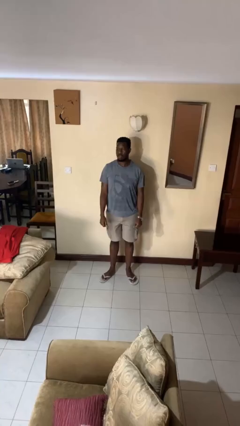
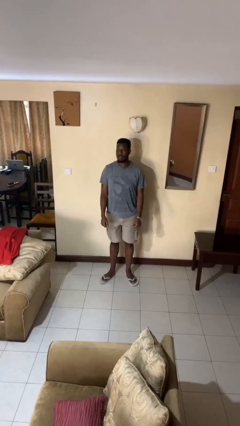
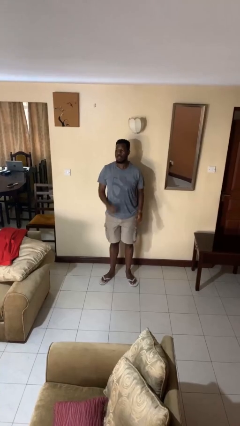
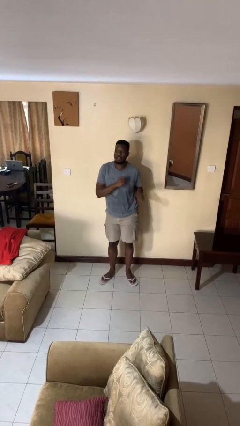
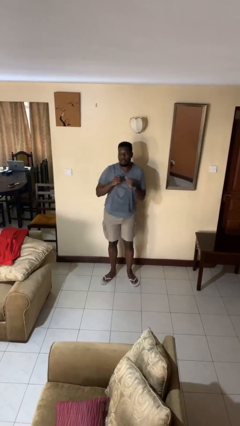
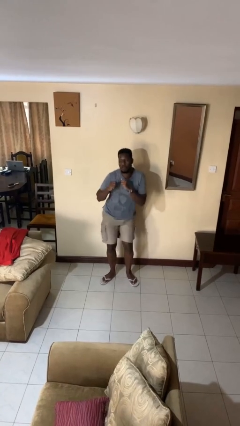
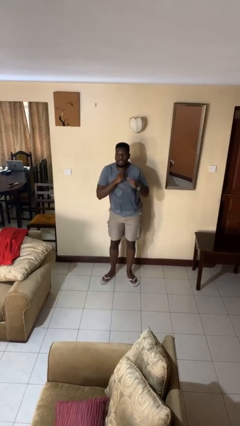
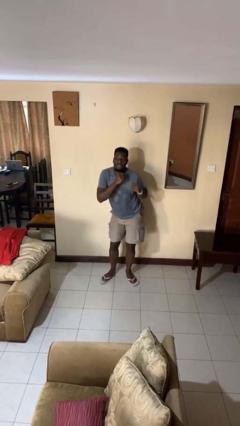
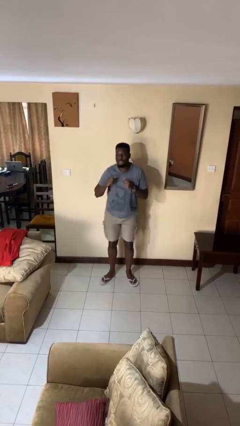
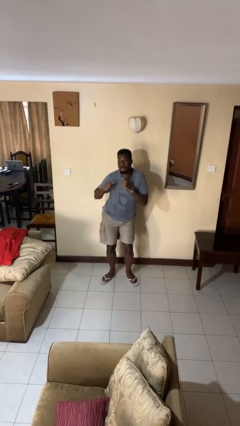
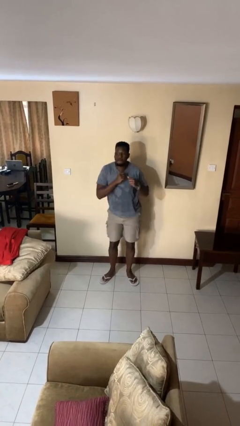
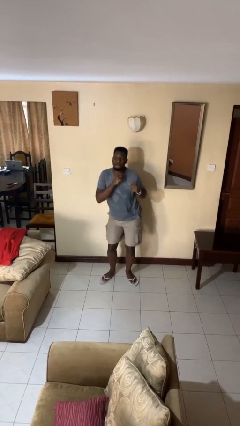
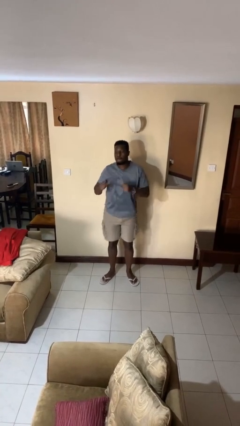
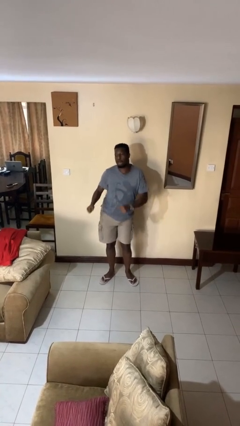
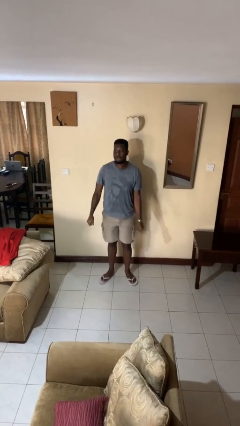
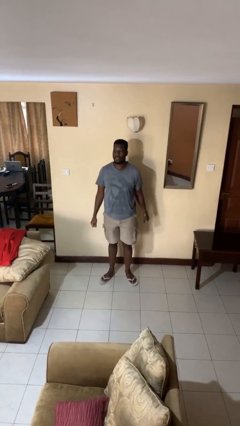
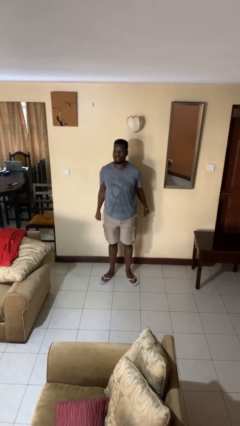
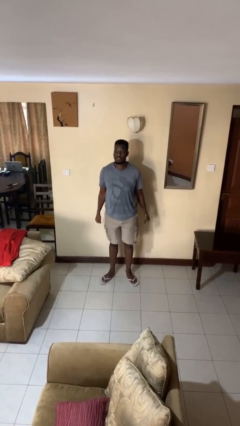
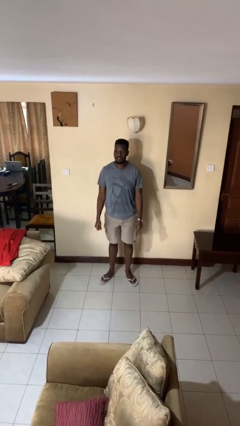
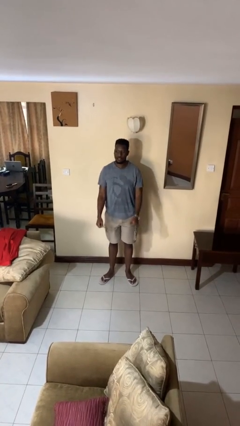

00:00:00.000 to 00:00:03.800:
person wiggles hips

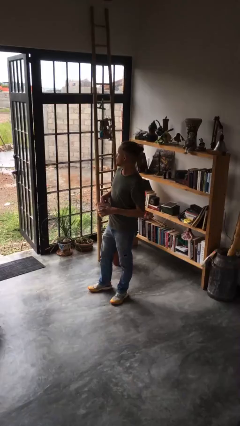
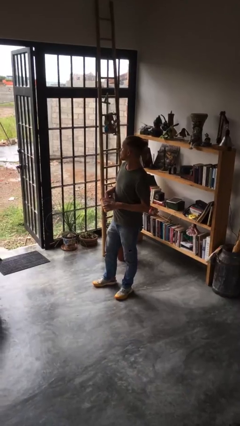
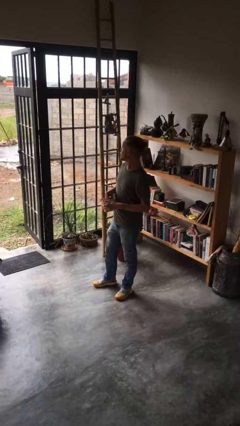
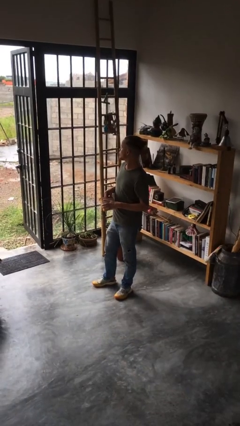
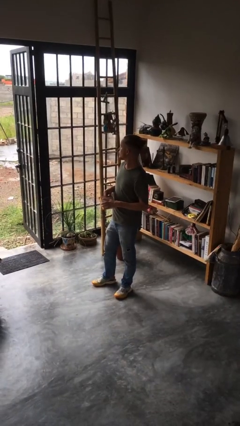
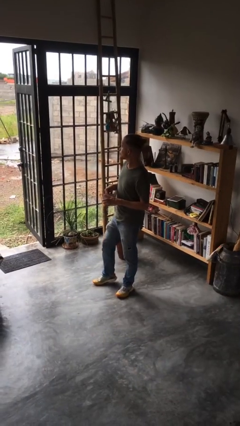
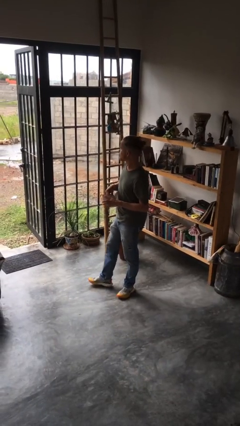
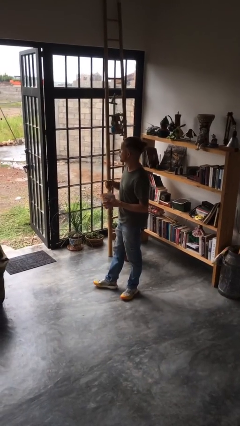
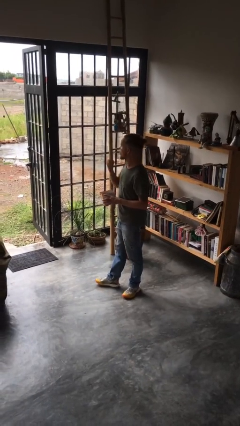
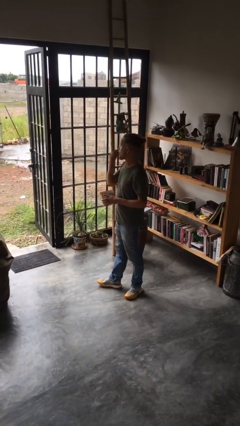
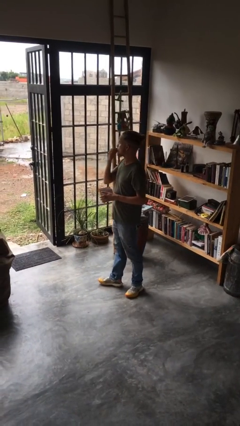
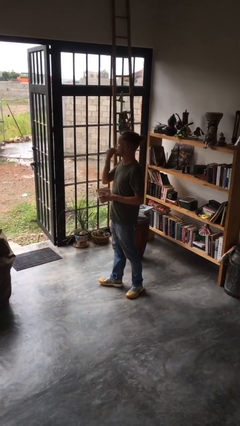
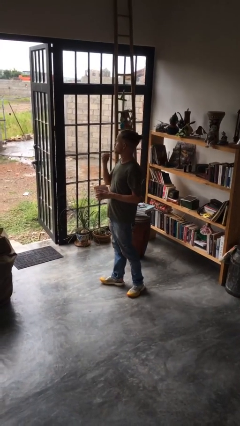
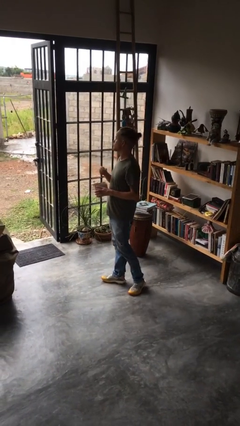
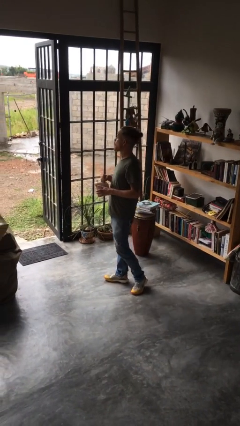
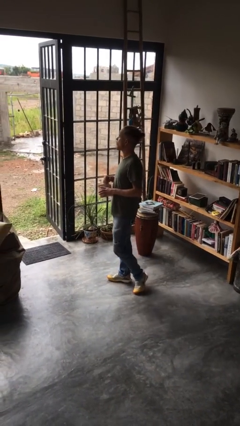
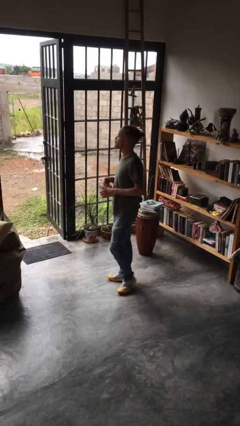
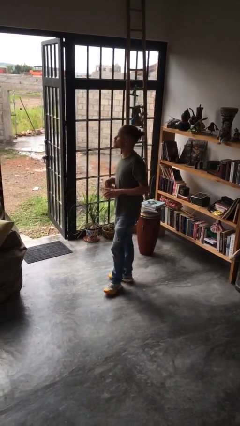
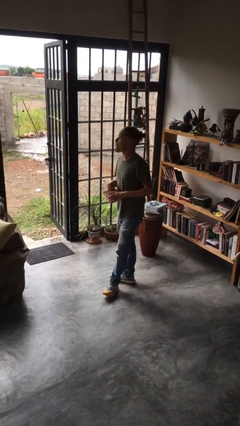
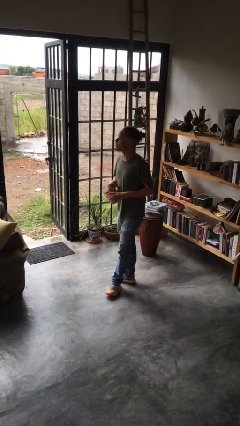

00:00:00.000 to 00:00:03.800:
person eats snack from bag

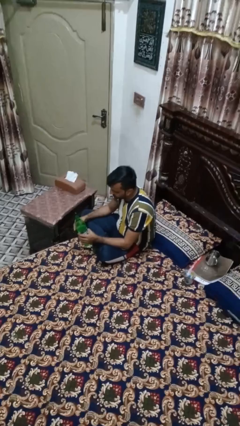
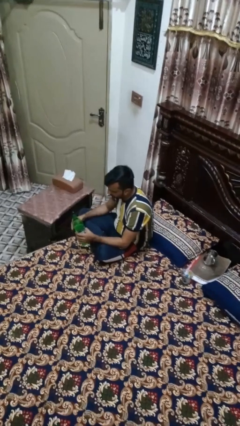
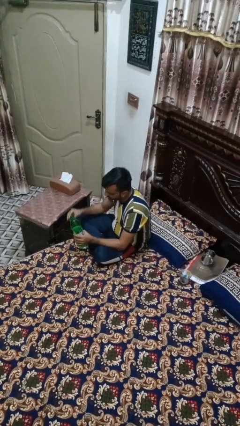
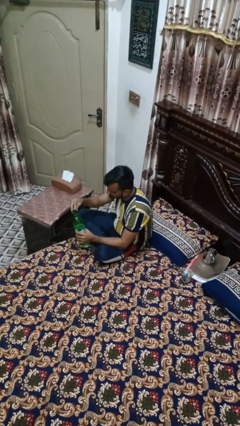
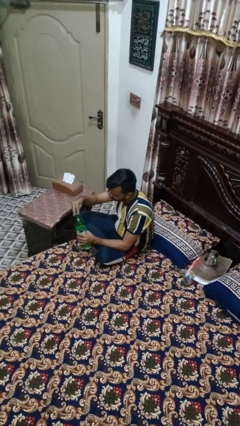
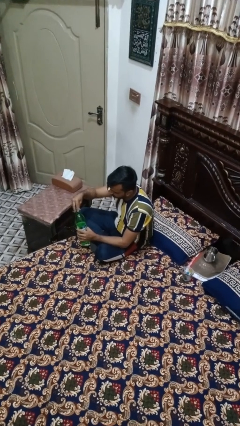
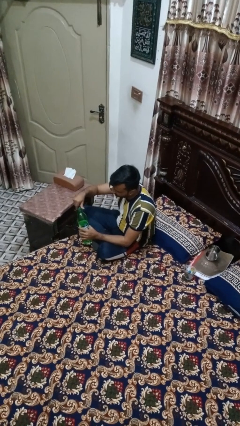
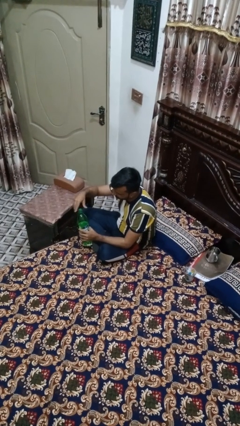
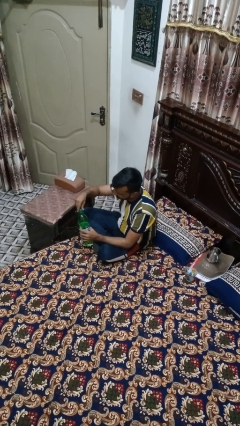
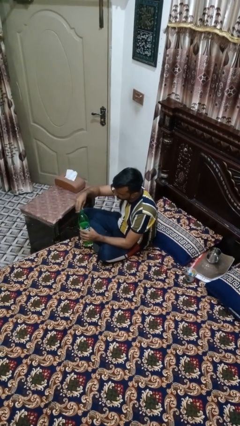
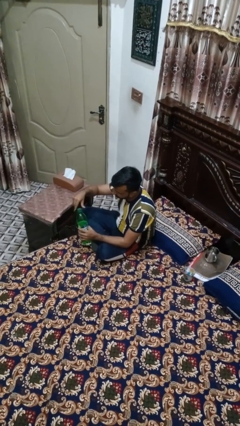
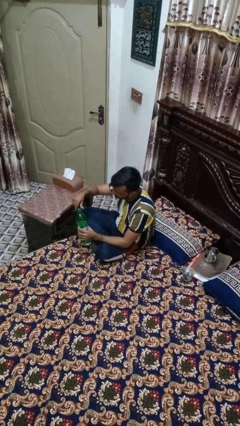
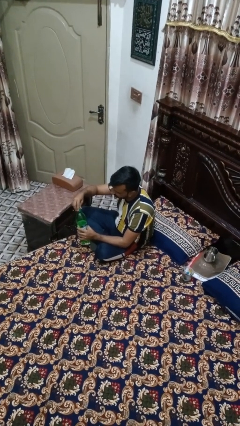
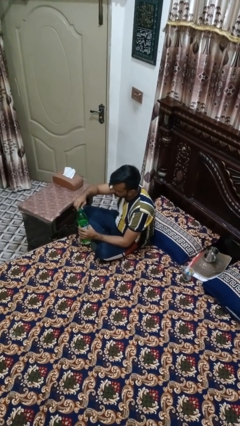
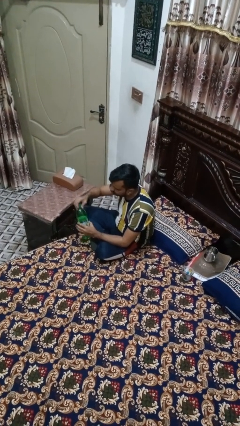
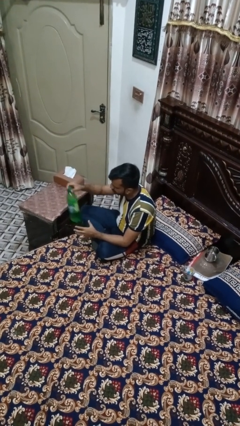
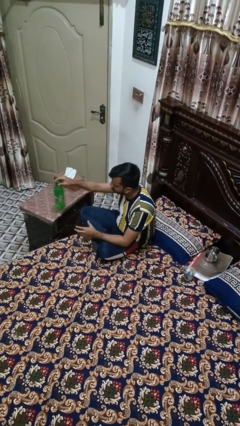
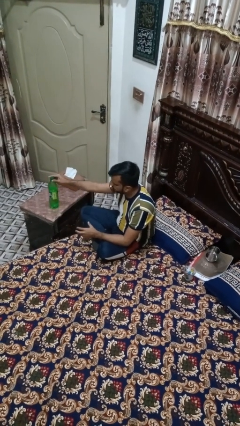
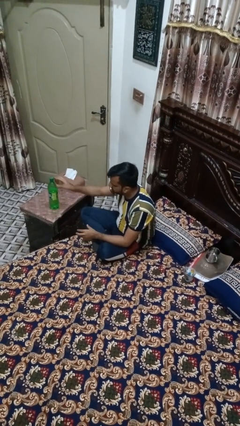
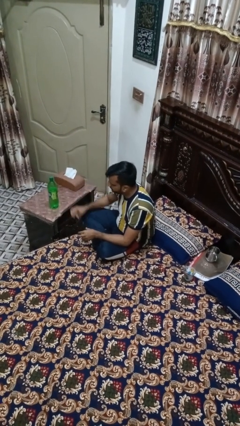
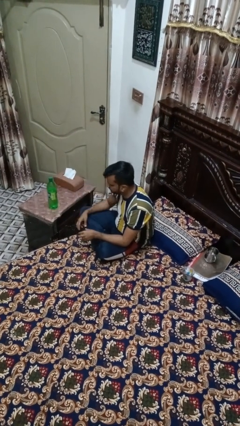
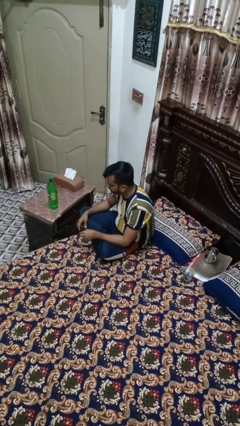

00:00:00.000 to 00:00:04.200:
person screws lid to bottle

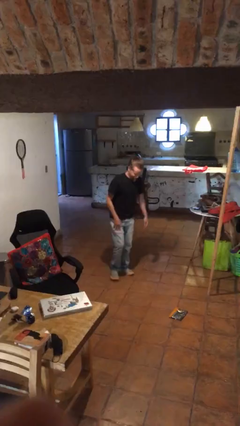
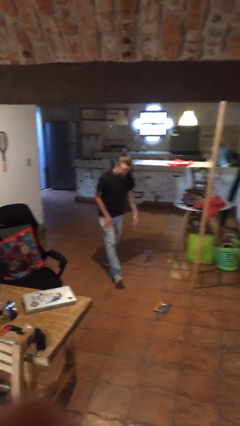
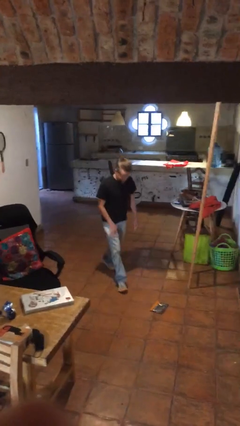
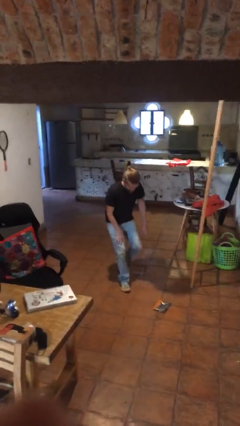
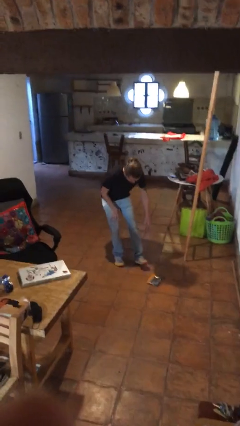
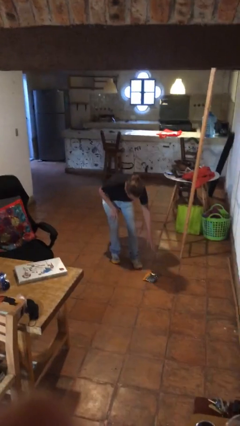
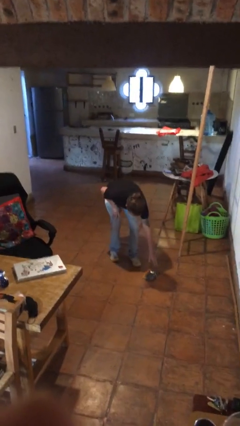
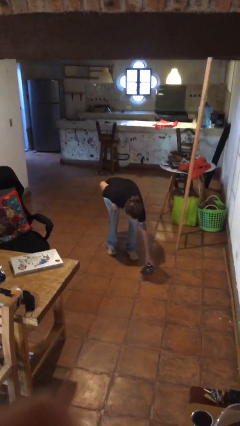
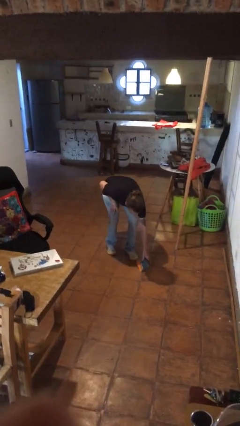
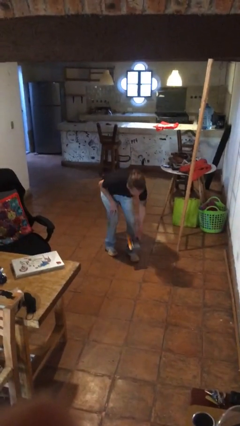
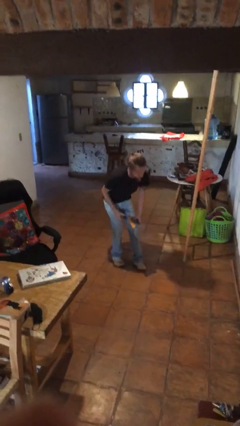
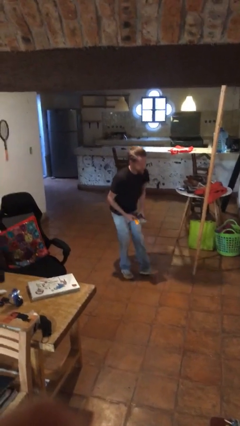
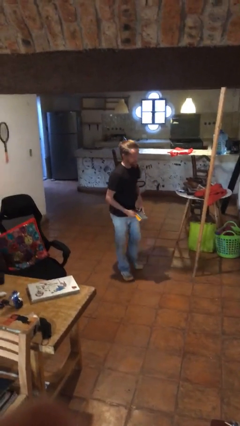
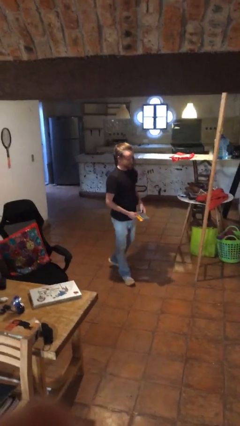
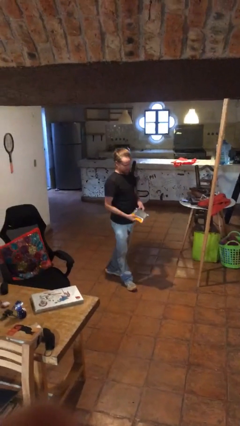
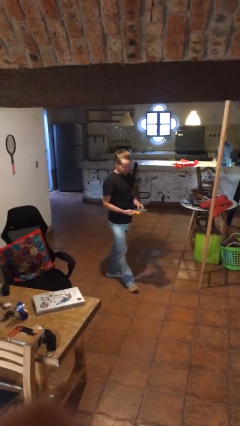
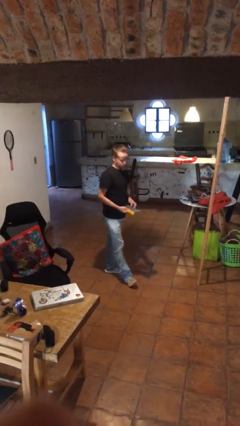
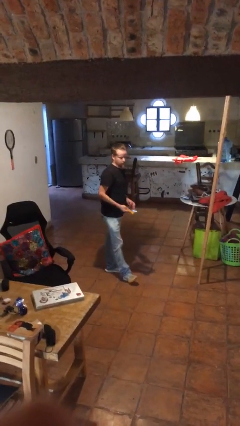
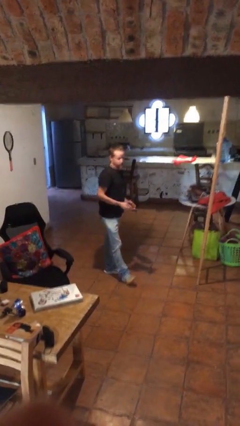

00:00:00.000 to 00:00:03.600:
person picks up object from floor

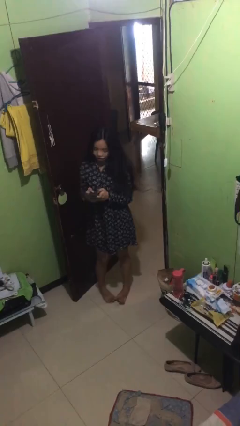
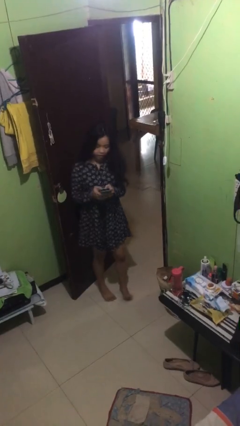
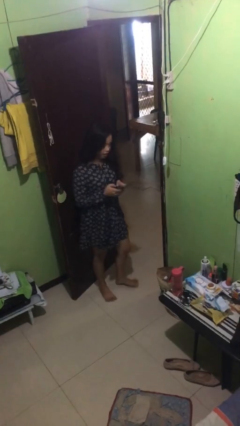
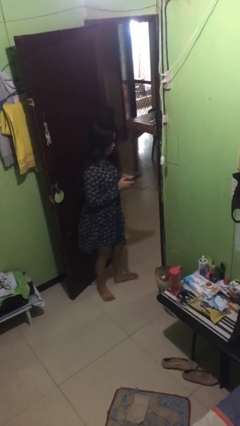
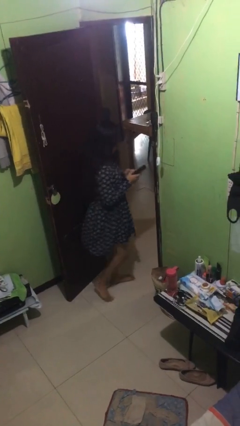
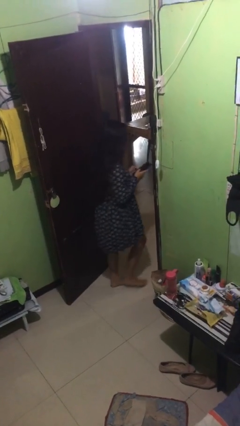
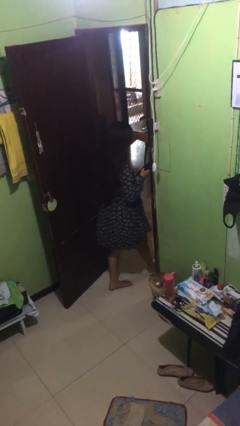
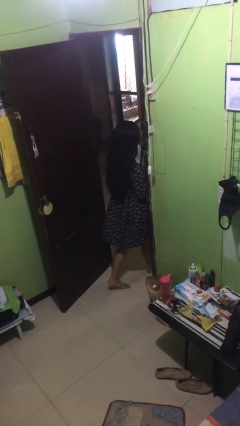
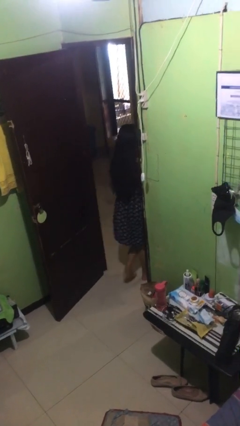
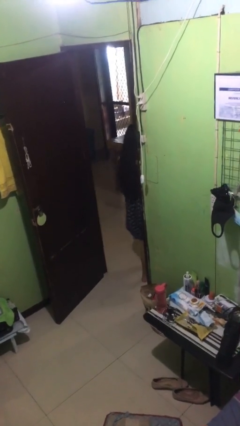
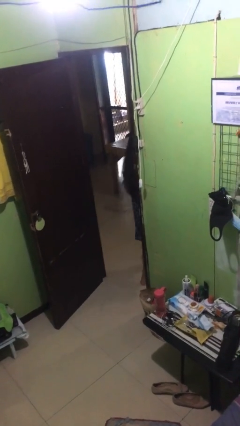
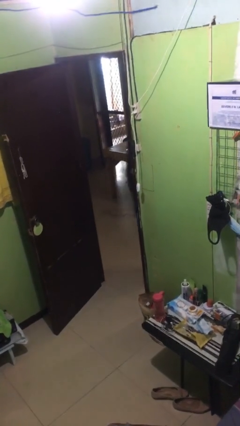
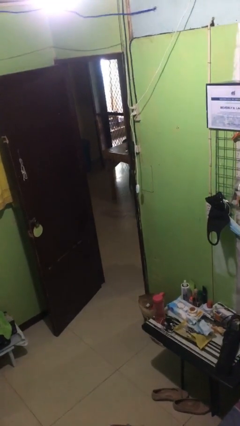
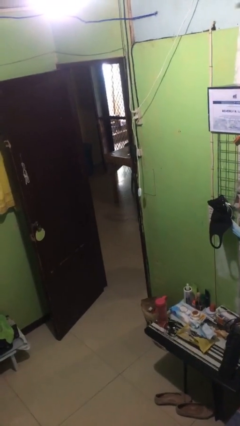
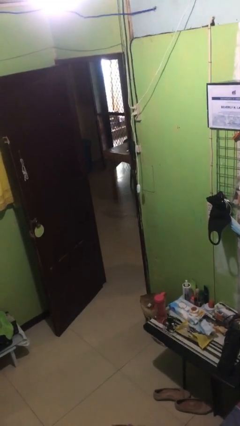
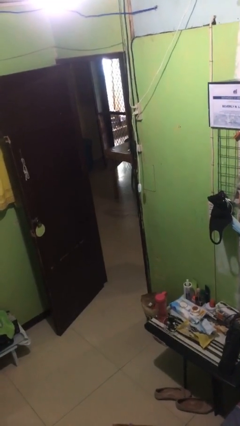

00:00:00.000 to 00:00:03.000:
person exits scene through structure
